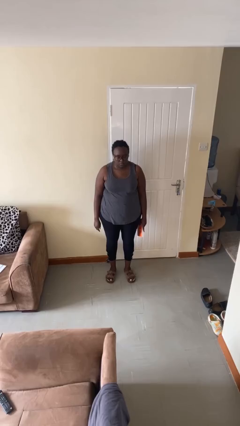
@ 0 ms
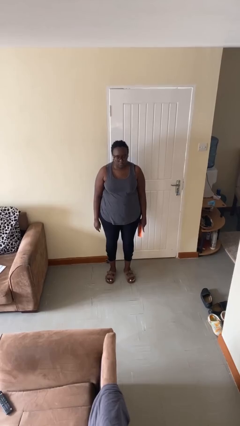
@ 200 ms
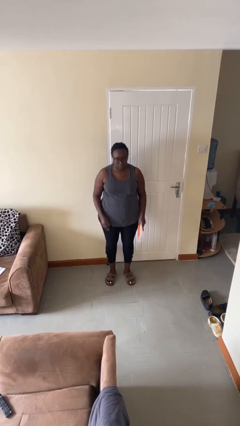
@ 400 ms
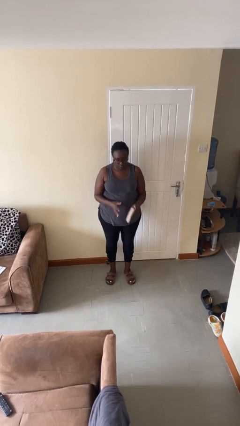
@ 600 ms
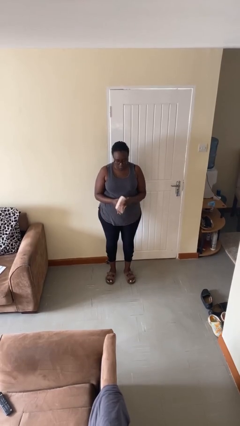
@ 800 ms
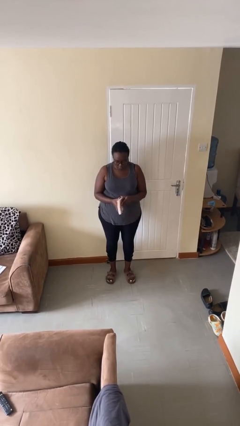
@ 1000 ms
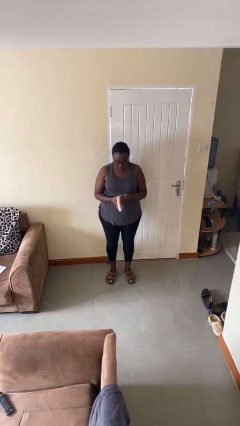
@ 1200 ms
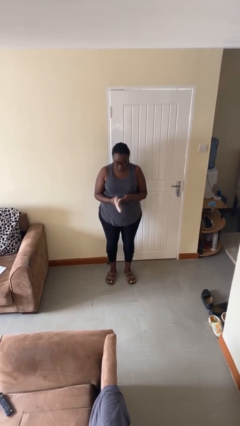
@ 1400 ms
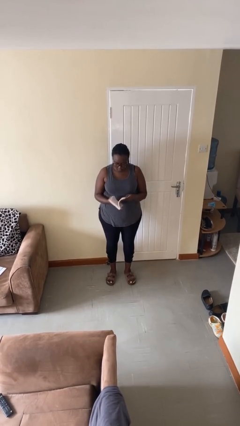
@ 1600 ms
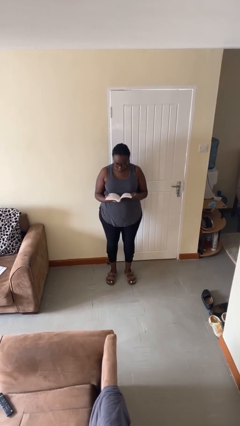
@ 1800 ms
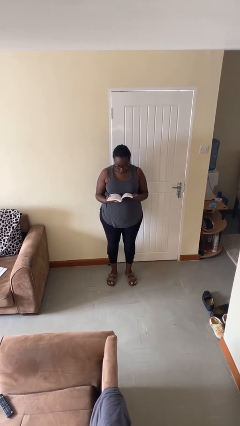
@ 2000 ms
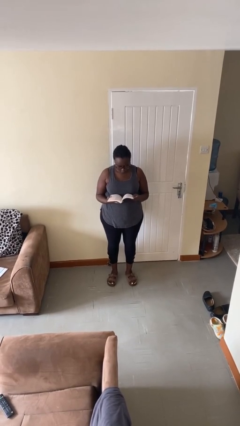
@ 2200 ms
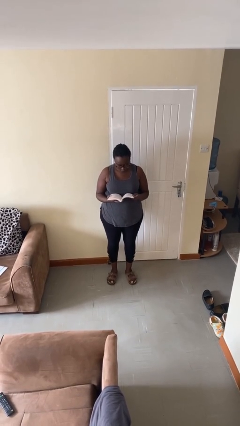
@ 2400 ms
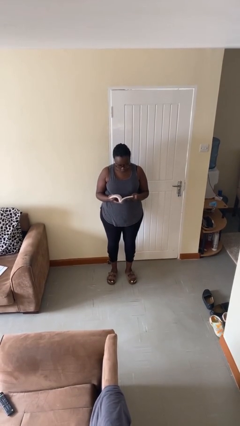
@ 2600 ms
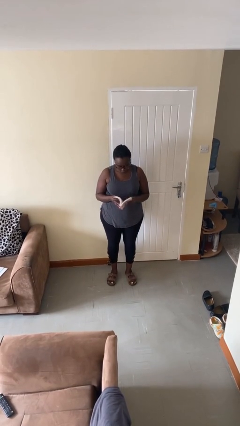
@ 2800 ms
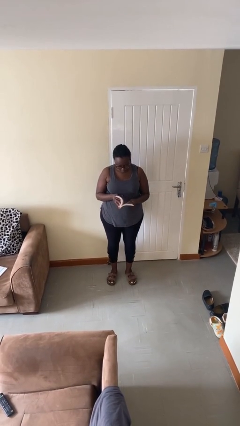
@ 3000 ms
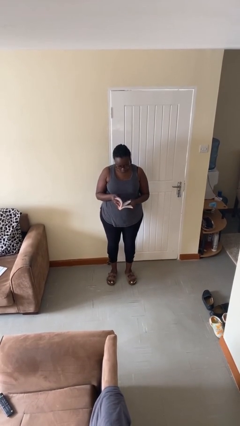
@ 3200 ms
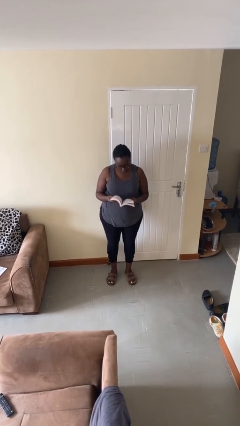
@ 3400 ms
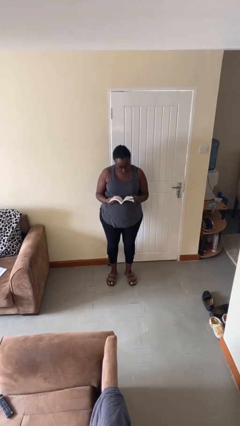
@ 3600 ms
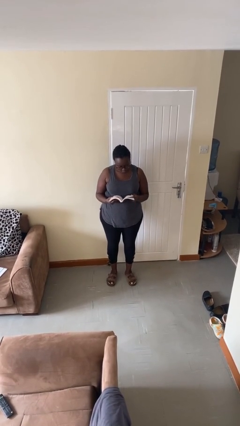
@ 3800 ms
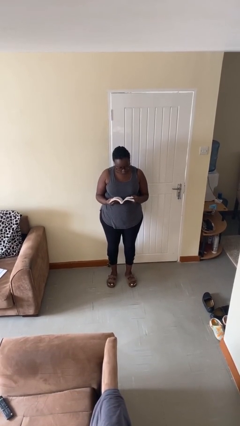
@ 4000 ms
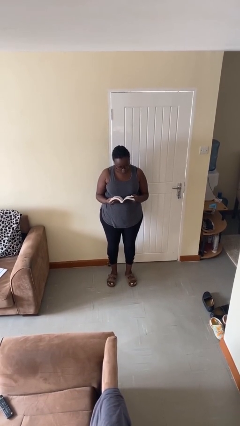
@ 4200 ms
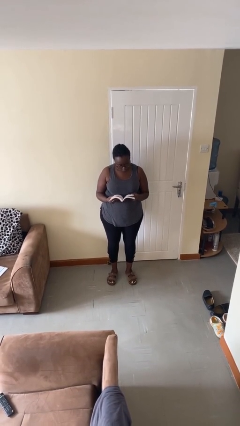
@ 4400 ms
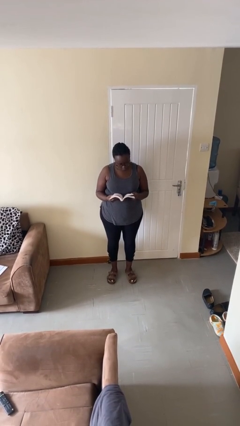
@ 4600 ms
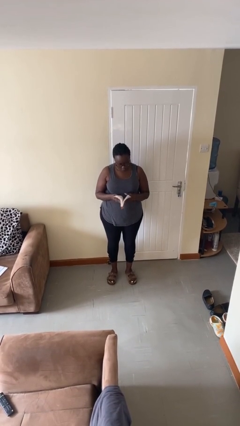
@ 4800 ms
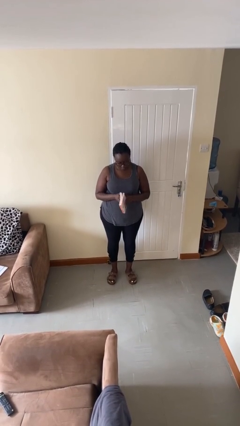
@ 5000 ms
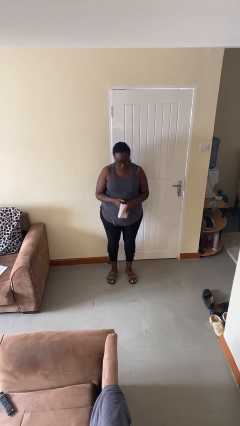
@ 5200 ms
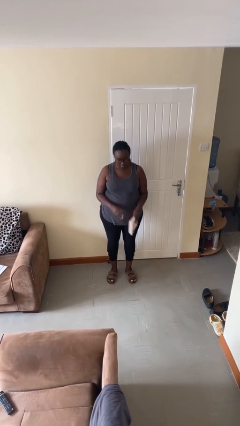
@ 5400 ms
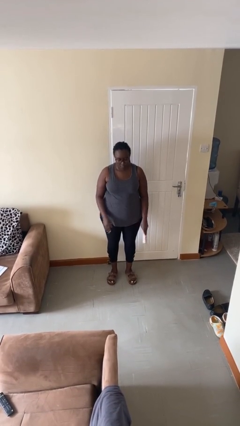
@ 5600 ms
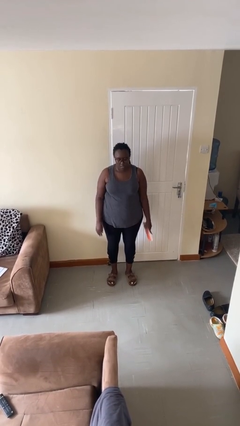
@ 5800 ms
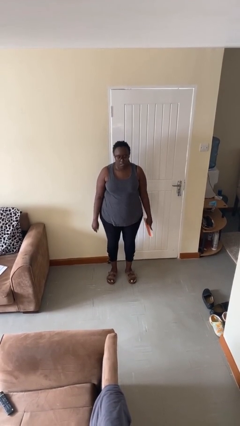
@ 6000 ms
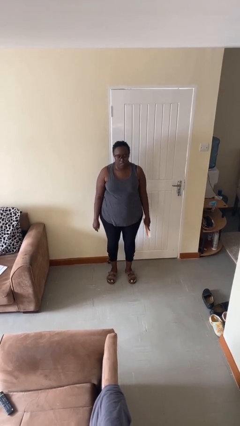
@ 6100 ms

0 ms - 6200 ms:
person reads book

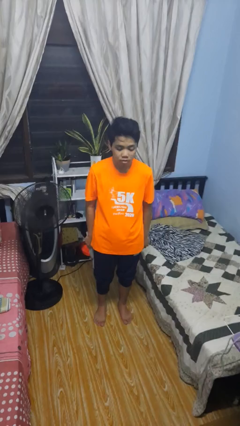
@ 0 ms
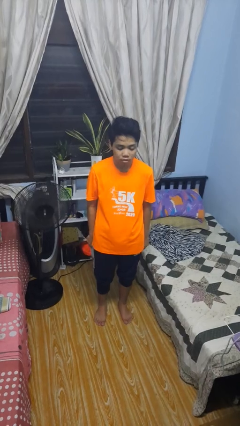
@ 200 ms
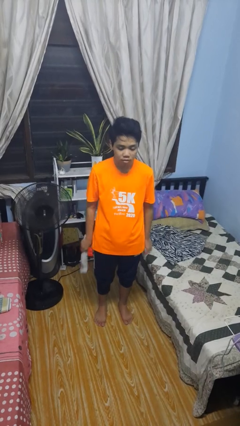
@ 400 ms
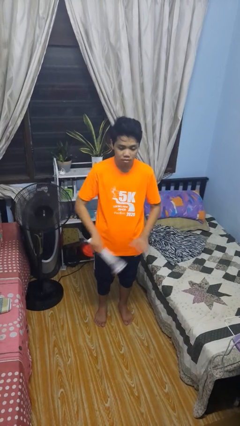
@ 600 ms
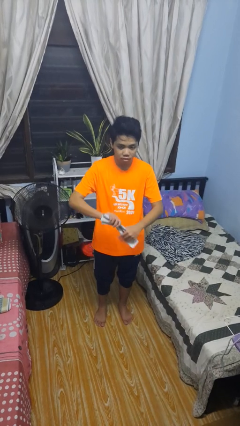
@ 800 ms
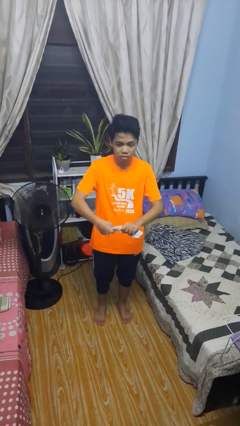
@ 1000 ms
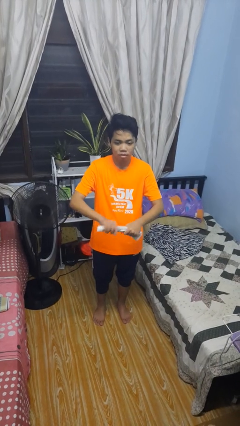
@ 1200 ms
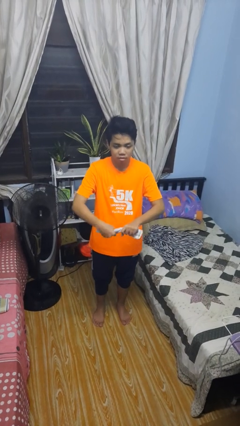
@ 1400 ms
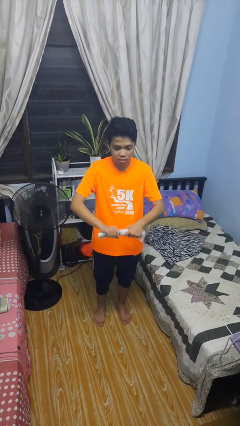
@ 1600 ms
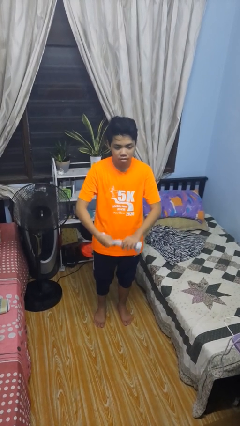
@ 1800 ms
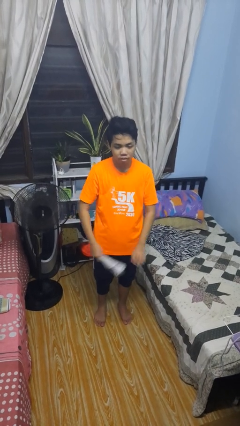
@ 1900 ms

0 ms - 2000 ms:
person squeezes object

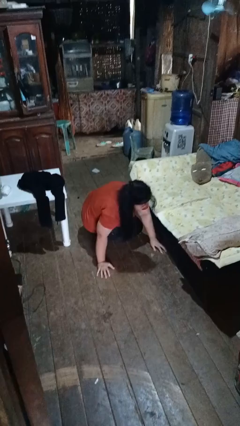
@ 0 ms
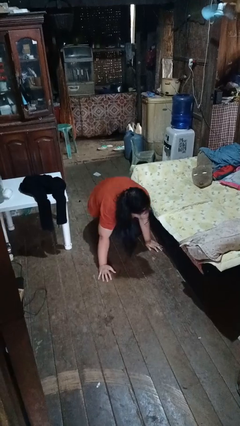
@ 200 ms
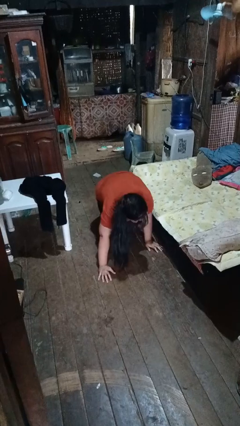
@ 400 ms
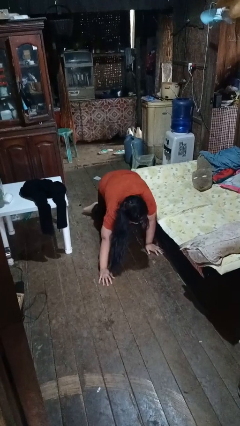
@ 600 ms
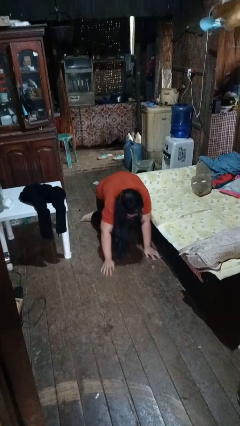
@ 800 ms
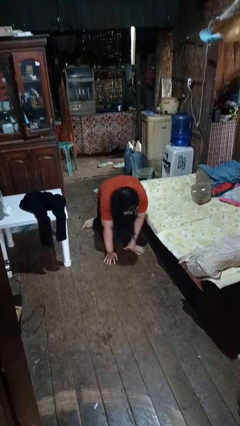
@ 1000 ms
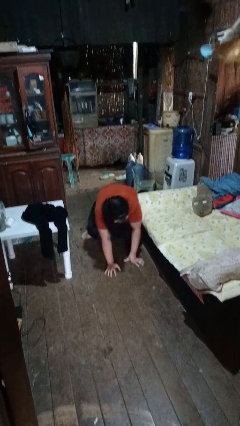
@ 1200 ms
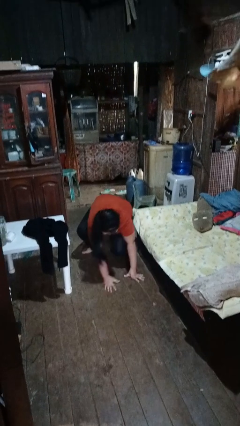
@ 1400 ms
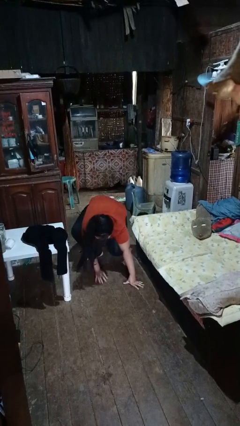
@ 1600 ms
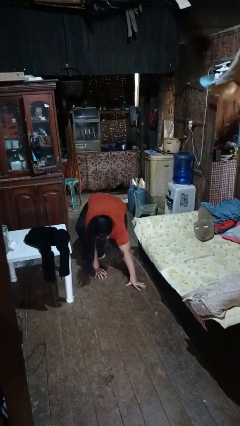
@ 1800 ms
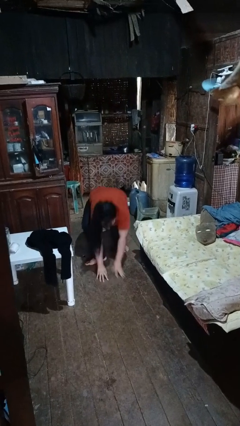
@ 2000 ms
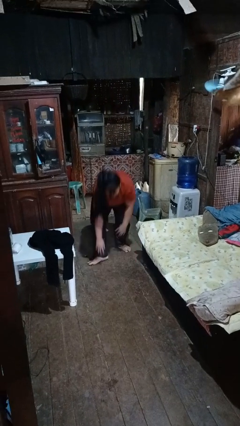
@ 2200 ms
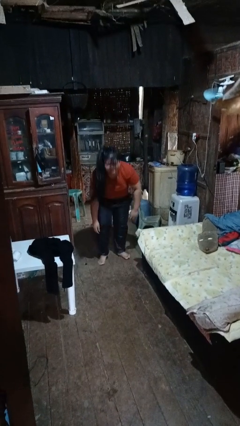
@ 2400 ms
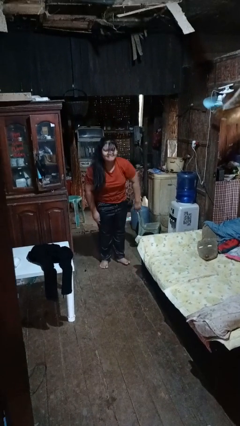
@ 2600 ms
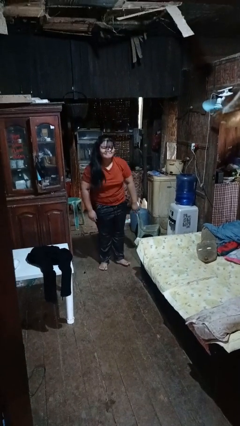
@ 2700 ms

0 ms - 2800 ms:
person stands up from floor

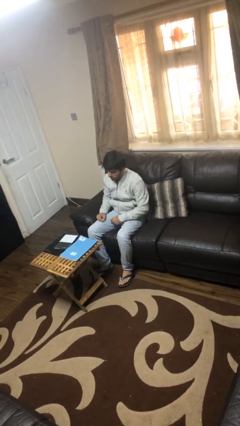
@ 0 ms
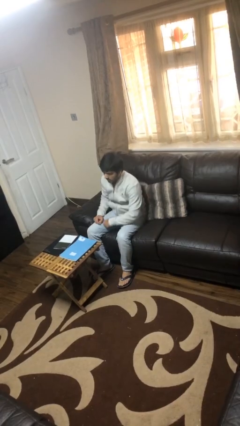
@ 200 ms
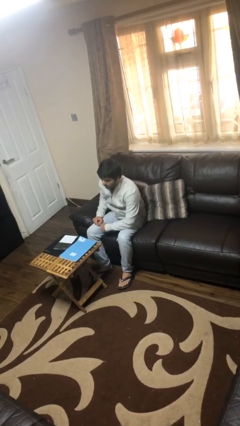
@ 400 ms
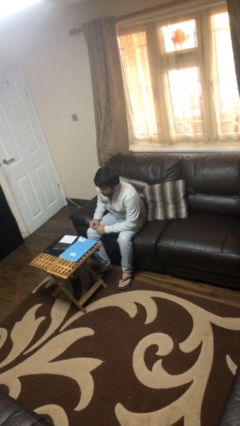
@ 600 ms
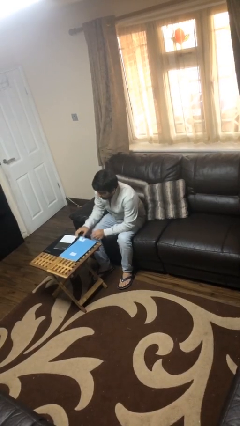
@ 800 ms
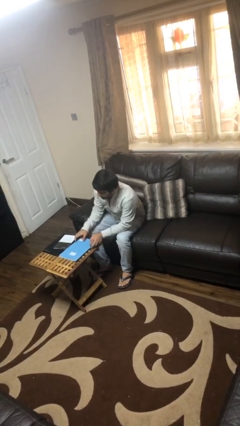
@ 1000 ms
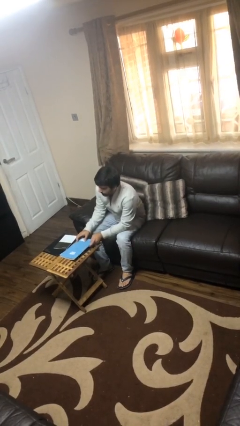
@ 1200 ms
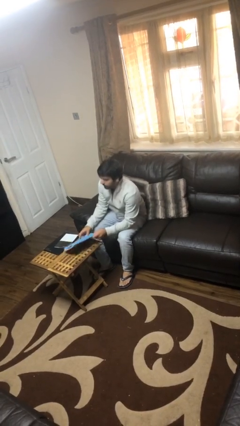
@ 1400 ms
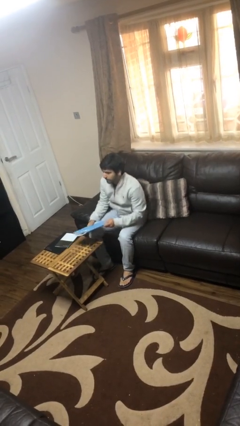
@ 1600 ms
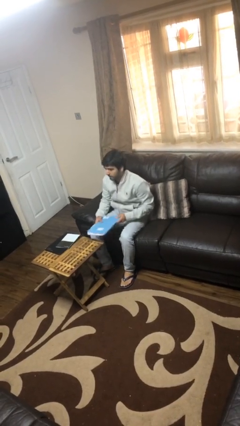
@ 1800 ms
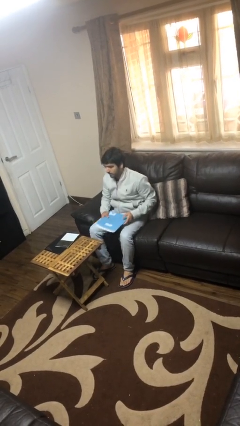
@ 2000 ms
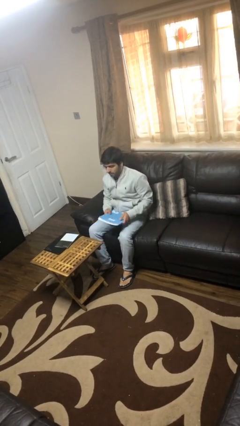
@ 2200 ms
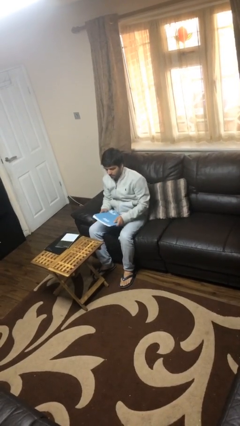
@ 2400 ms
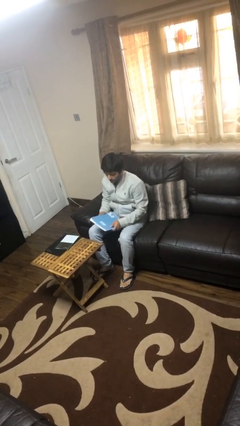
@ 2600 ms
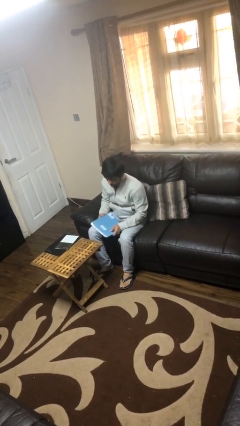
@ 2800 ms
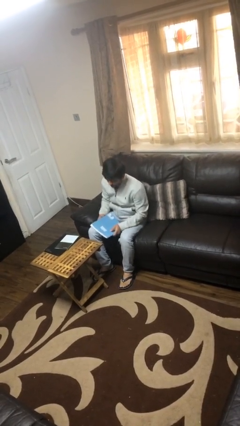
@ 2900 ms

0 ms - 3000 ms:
person picks up object from table

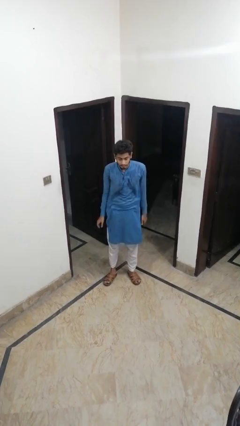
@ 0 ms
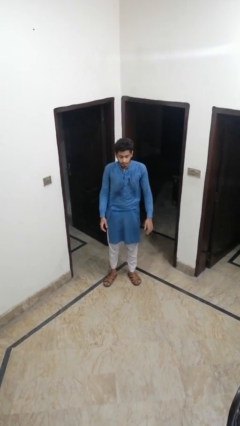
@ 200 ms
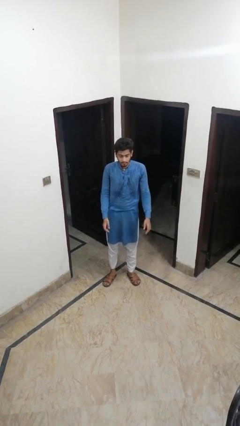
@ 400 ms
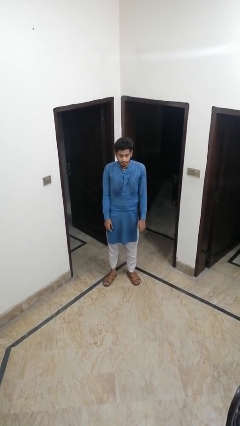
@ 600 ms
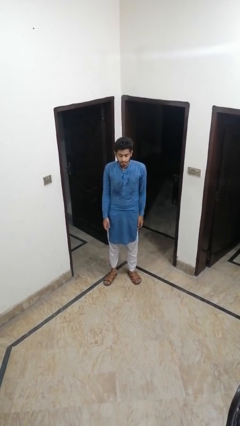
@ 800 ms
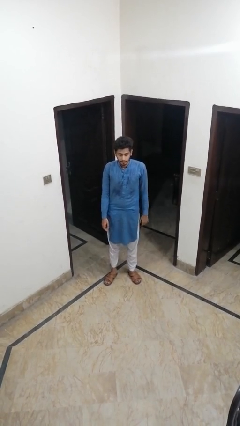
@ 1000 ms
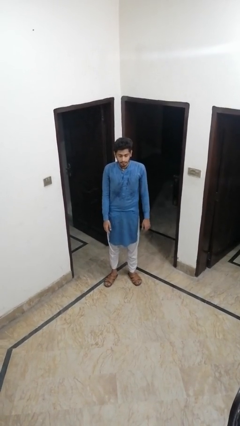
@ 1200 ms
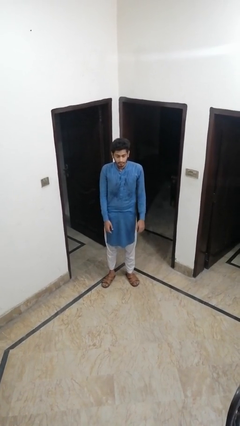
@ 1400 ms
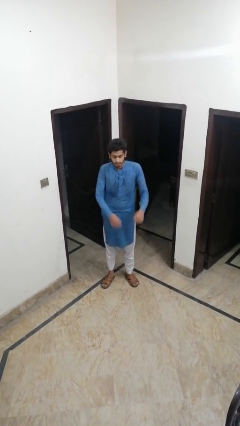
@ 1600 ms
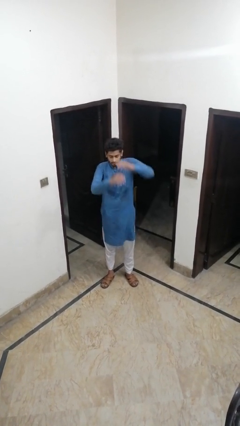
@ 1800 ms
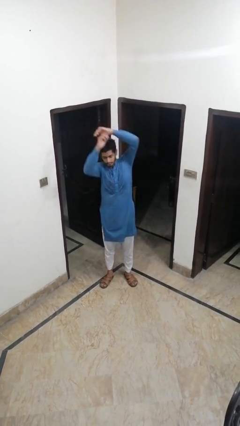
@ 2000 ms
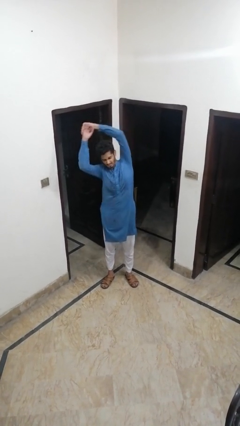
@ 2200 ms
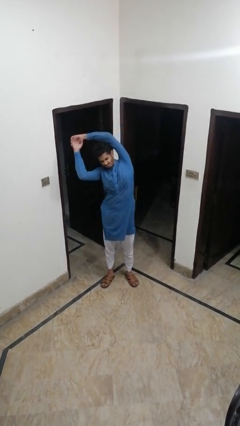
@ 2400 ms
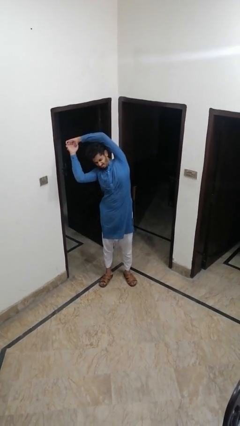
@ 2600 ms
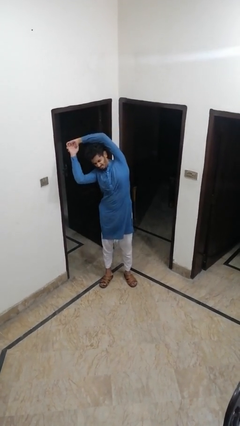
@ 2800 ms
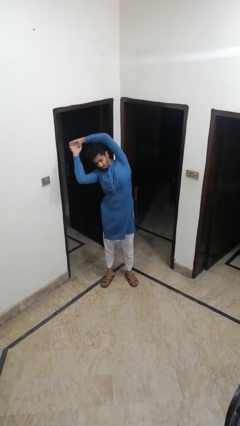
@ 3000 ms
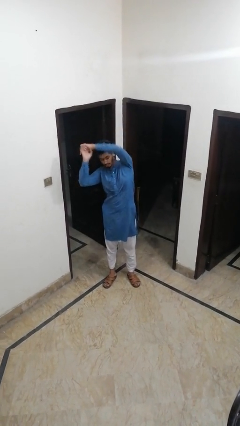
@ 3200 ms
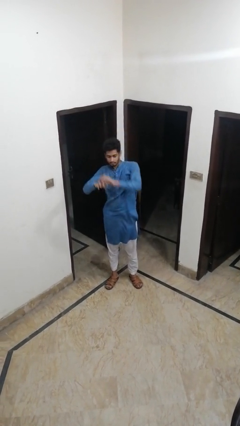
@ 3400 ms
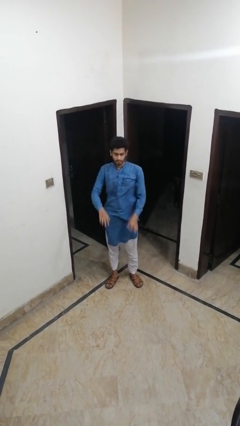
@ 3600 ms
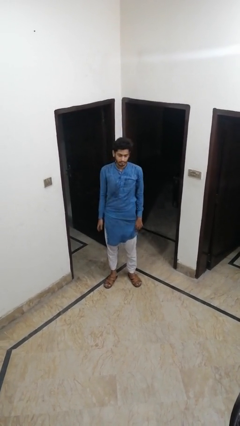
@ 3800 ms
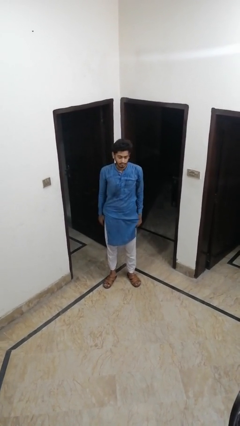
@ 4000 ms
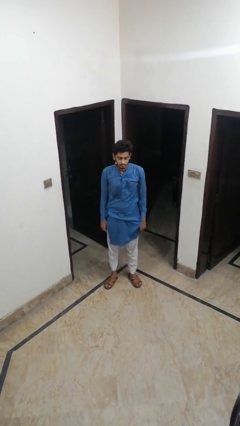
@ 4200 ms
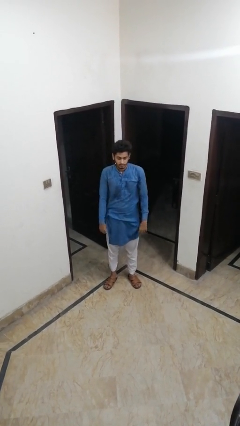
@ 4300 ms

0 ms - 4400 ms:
person stretches arms to side
